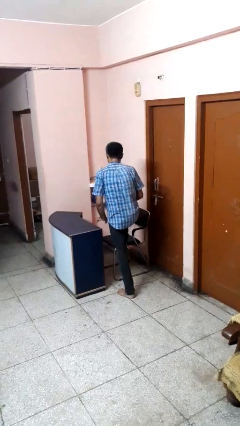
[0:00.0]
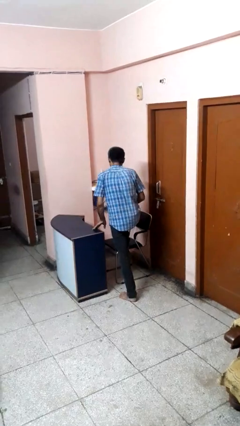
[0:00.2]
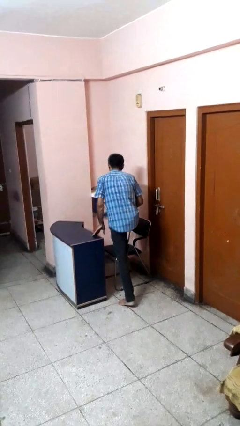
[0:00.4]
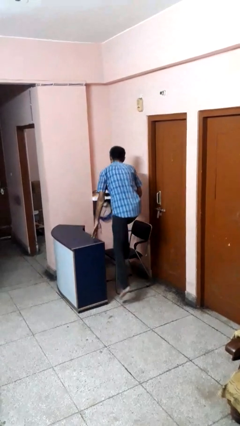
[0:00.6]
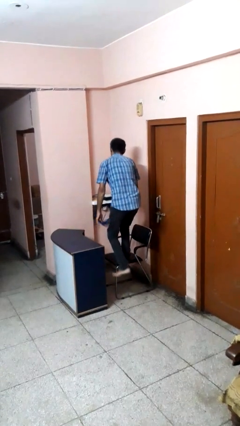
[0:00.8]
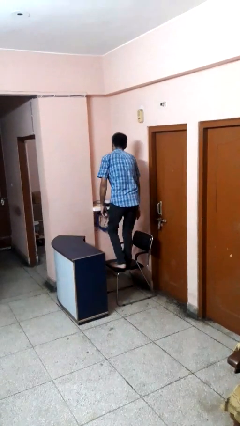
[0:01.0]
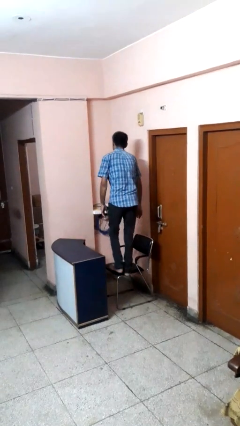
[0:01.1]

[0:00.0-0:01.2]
person climbs on chair

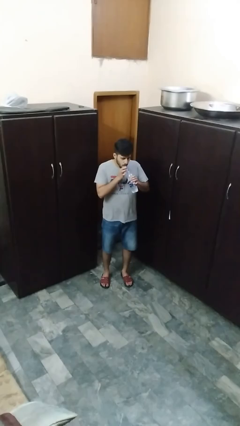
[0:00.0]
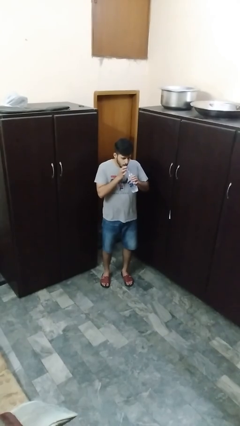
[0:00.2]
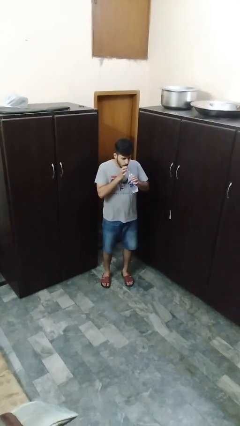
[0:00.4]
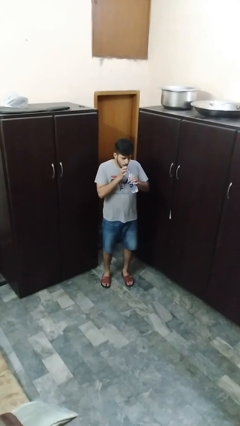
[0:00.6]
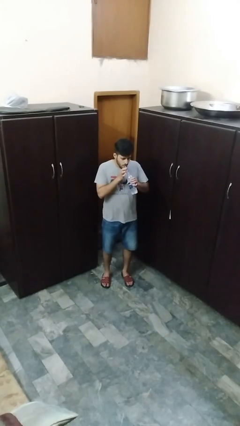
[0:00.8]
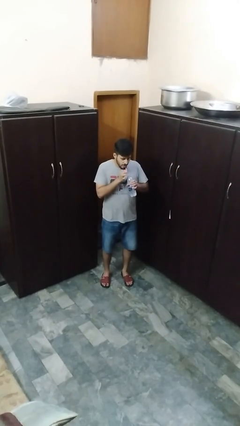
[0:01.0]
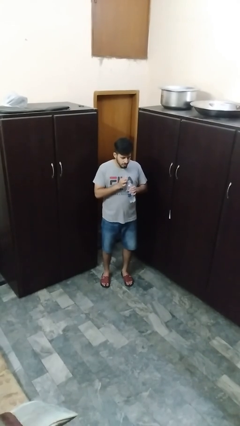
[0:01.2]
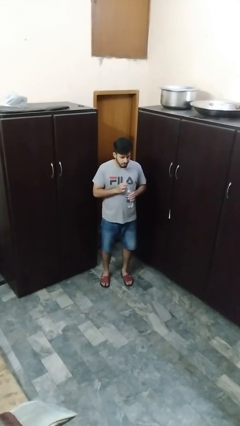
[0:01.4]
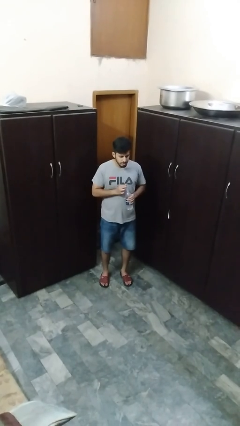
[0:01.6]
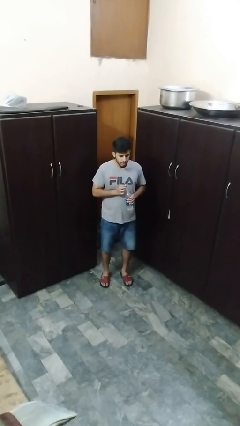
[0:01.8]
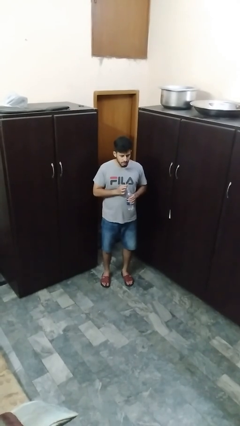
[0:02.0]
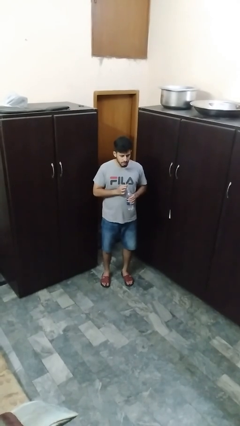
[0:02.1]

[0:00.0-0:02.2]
person drinks from straw

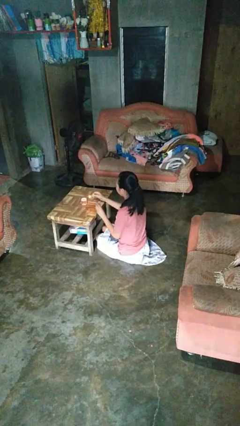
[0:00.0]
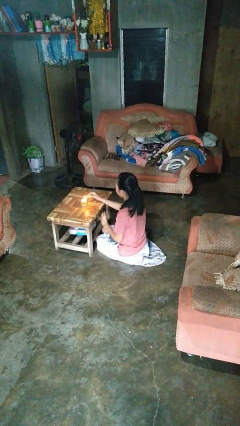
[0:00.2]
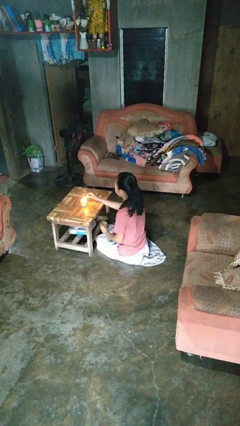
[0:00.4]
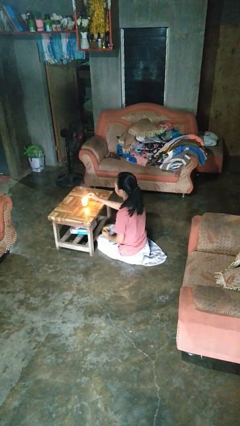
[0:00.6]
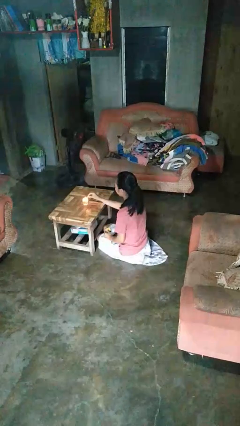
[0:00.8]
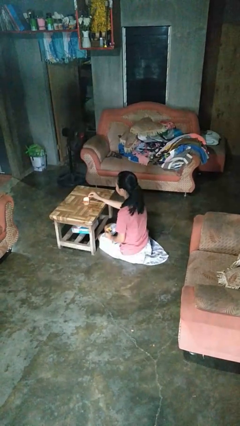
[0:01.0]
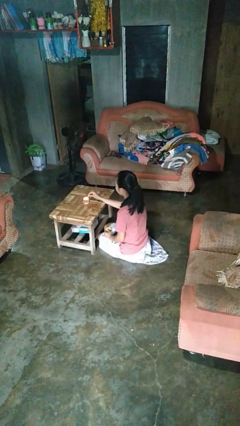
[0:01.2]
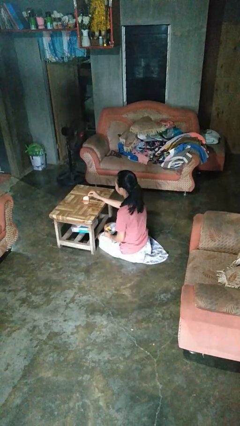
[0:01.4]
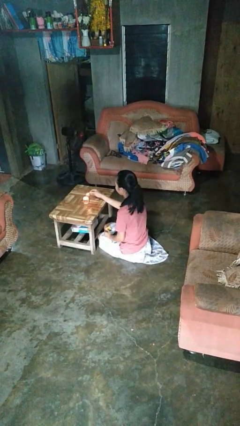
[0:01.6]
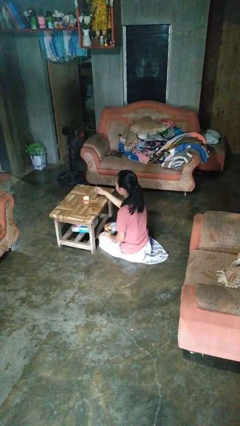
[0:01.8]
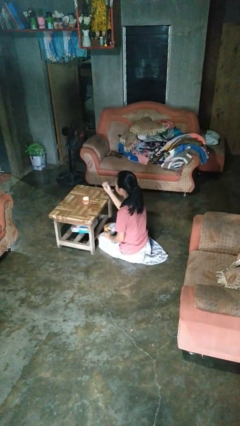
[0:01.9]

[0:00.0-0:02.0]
person lights candle

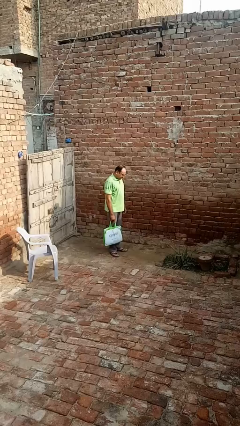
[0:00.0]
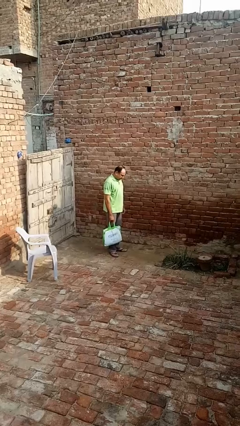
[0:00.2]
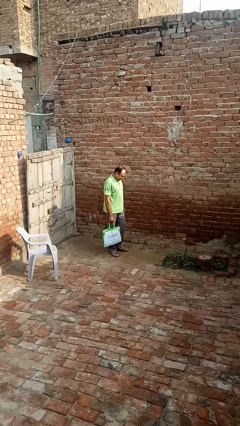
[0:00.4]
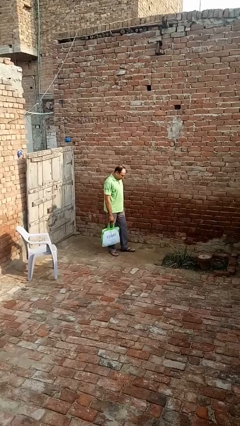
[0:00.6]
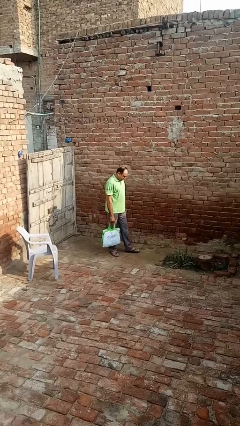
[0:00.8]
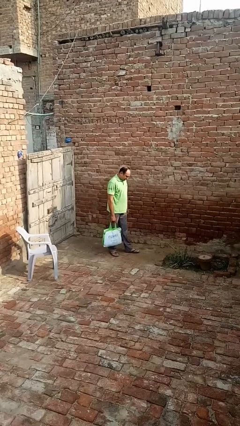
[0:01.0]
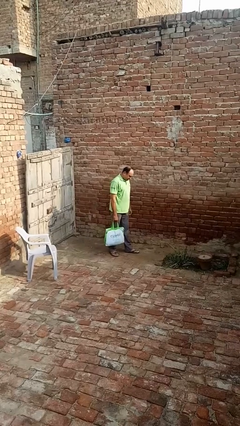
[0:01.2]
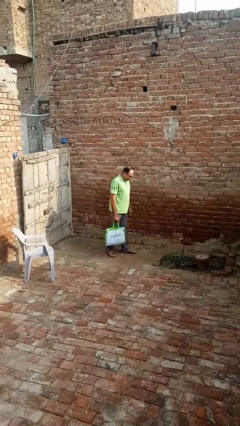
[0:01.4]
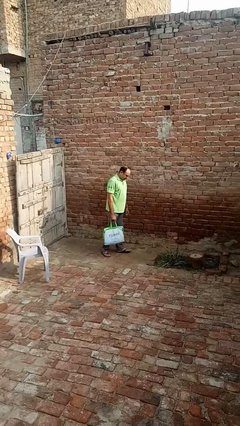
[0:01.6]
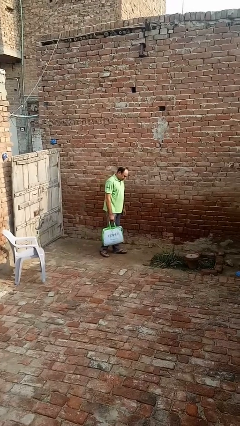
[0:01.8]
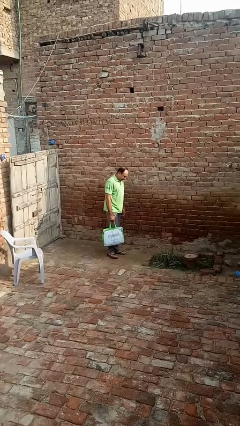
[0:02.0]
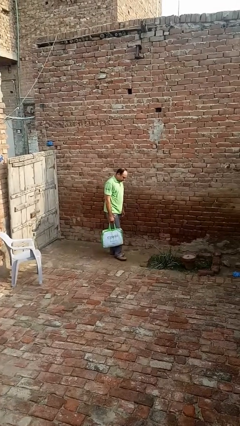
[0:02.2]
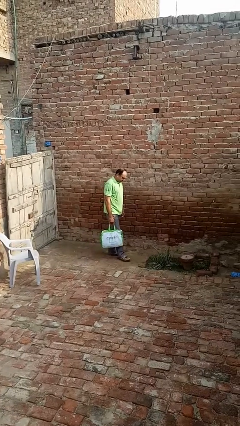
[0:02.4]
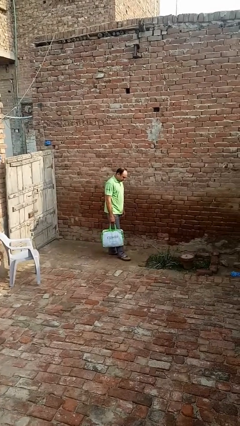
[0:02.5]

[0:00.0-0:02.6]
person carries groceries

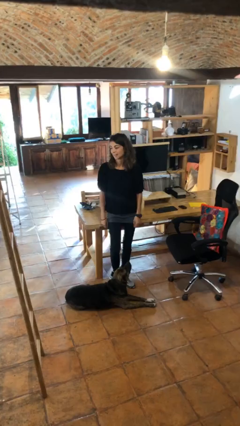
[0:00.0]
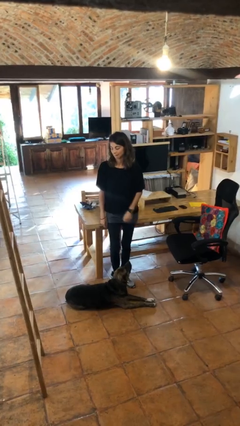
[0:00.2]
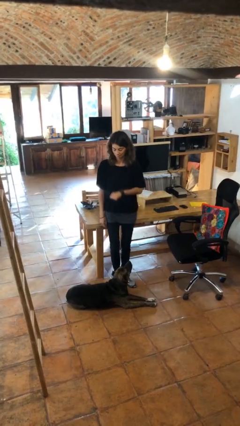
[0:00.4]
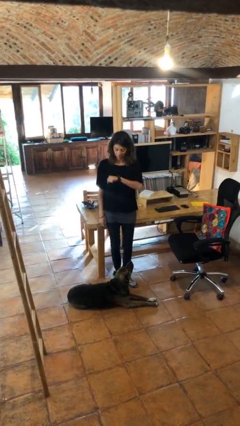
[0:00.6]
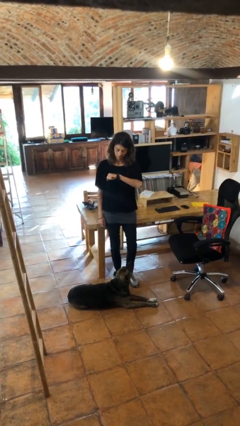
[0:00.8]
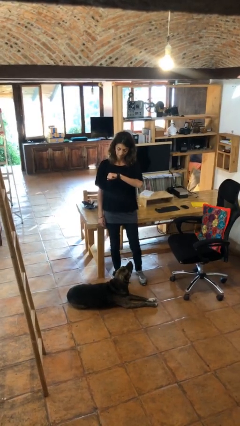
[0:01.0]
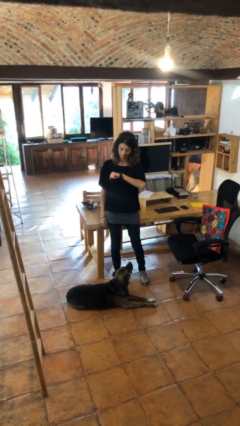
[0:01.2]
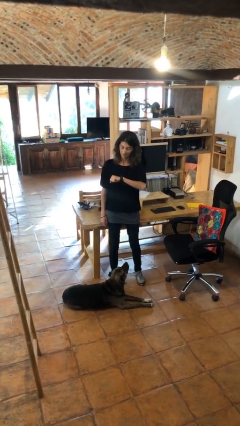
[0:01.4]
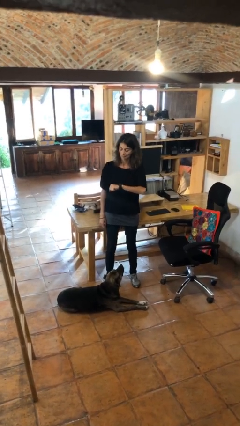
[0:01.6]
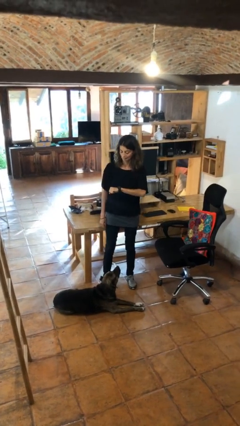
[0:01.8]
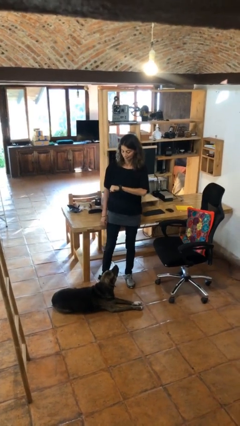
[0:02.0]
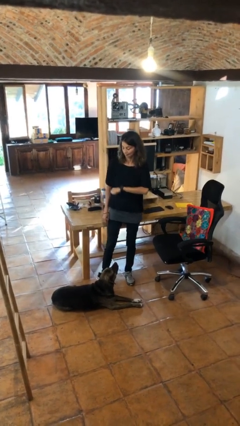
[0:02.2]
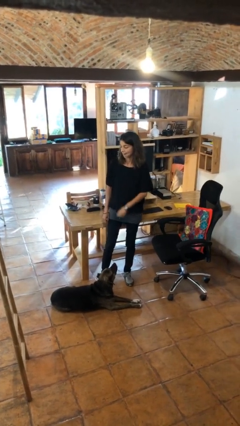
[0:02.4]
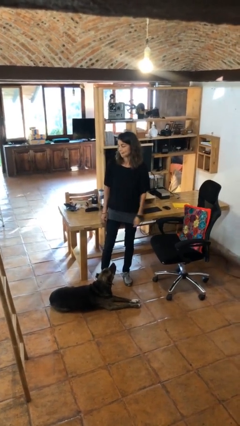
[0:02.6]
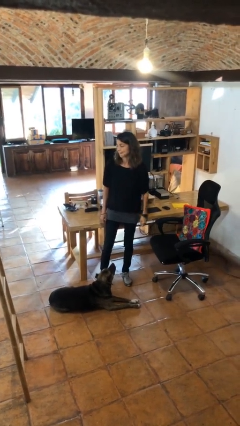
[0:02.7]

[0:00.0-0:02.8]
person looks at wristwatch

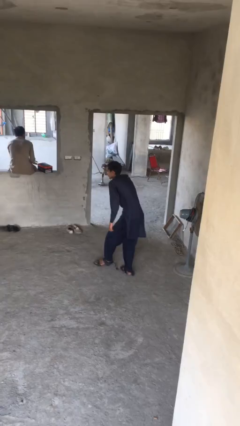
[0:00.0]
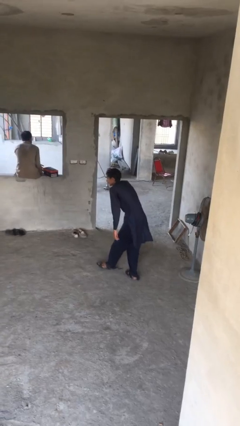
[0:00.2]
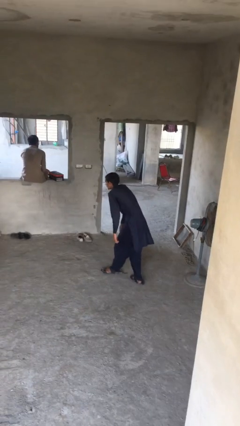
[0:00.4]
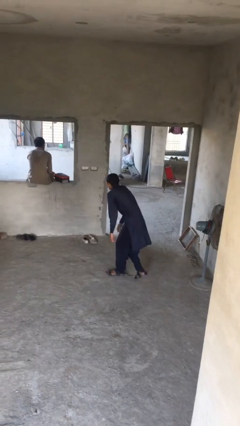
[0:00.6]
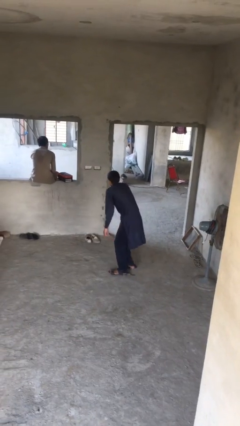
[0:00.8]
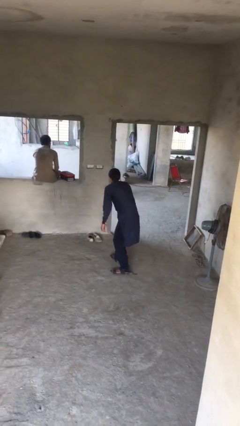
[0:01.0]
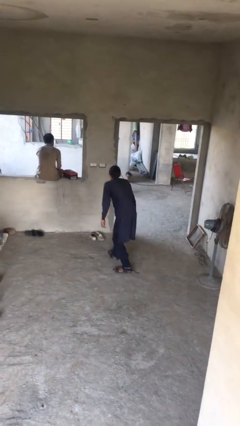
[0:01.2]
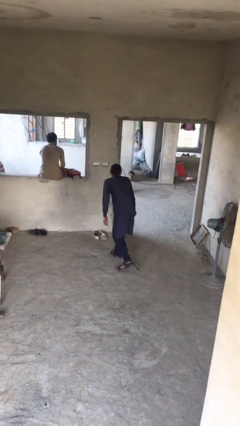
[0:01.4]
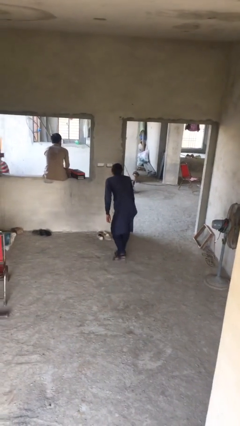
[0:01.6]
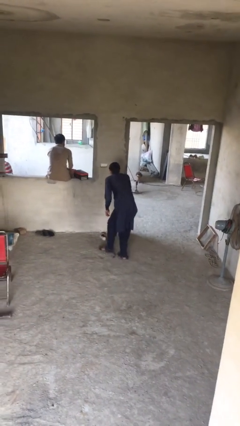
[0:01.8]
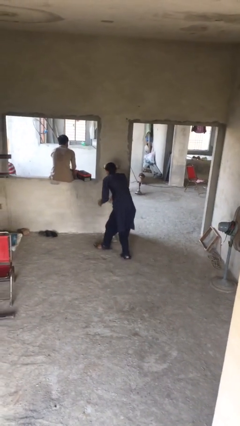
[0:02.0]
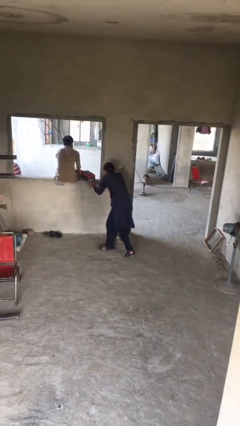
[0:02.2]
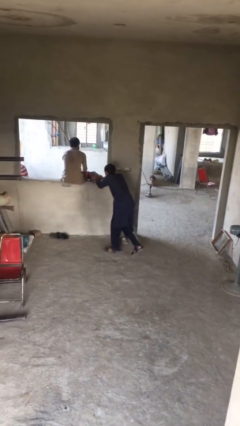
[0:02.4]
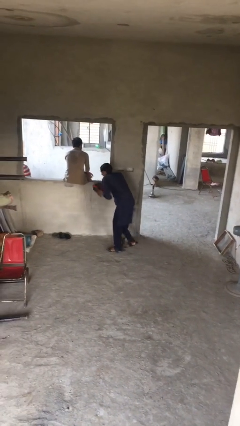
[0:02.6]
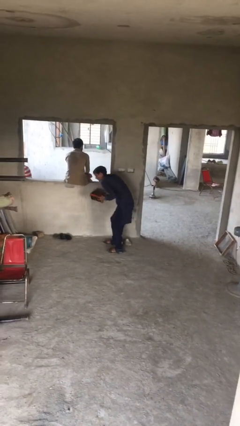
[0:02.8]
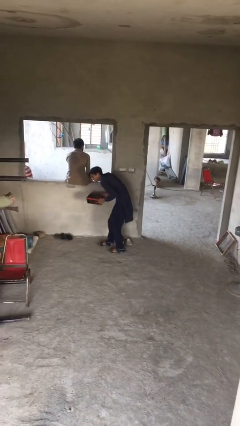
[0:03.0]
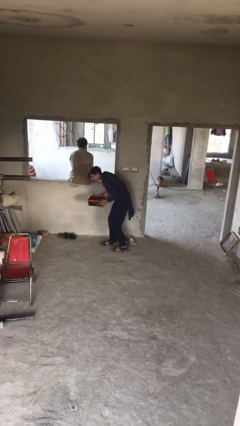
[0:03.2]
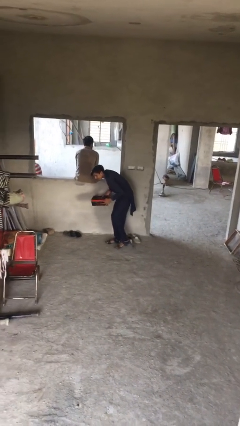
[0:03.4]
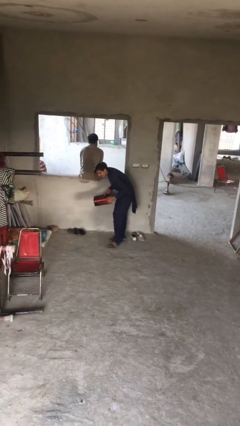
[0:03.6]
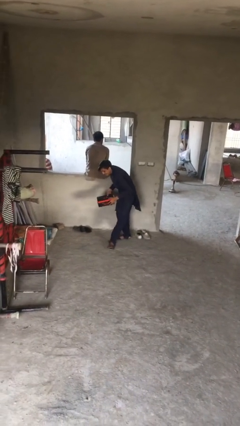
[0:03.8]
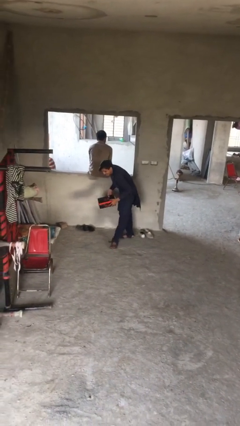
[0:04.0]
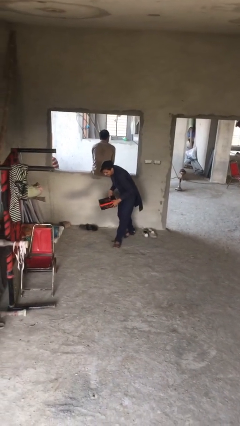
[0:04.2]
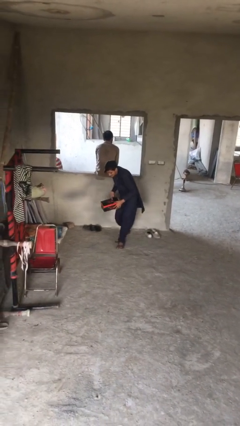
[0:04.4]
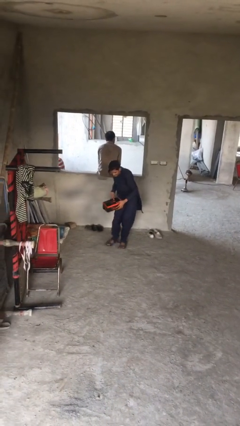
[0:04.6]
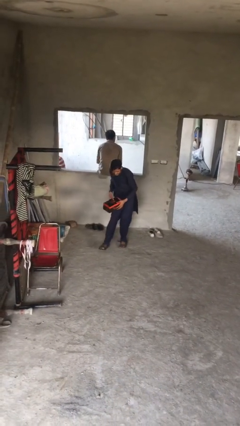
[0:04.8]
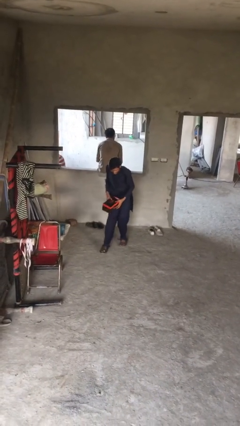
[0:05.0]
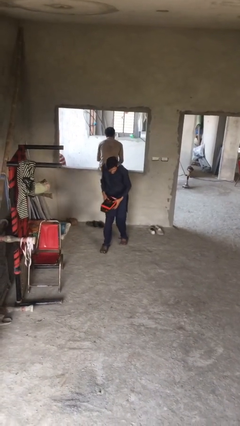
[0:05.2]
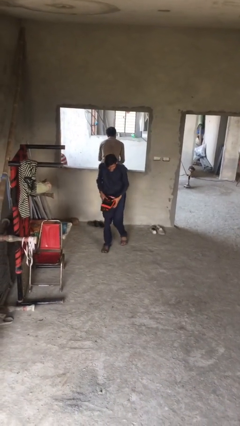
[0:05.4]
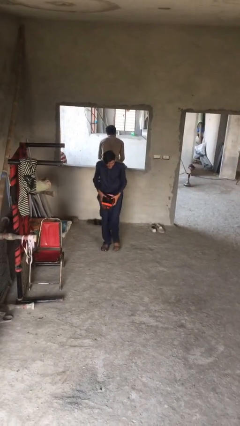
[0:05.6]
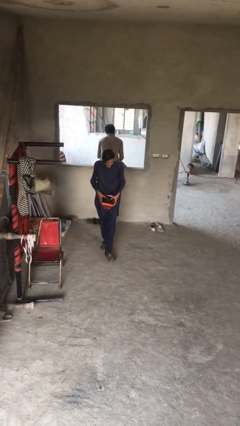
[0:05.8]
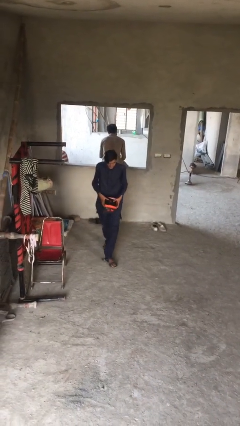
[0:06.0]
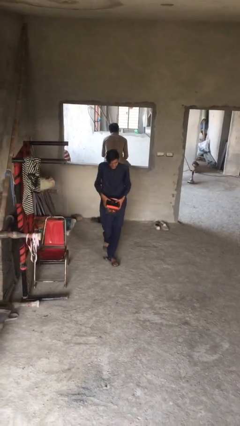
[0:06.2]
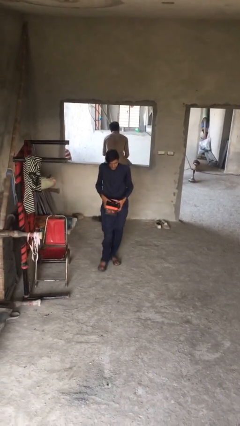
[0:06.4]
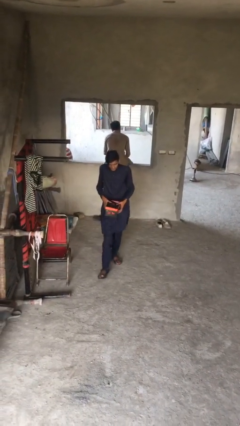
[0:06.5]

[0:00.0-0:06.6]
person steals object from person
